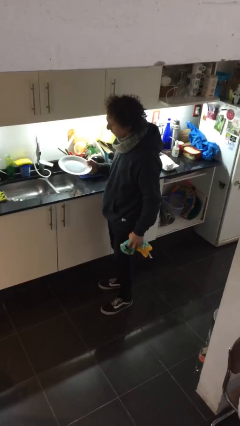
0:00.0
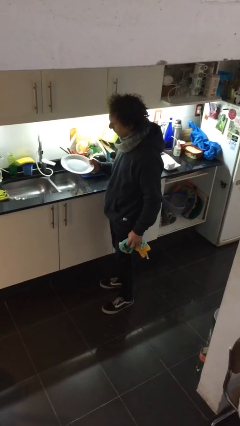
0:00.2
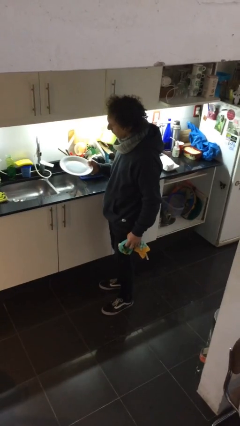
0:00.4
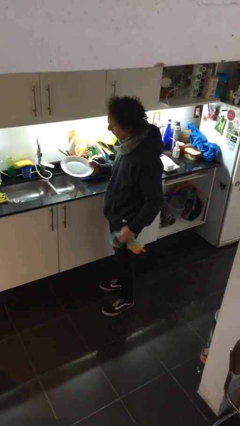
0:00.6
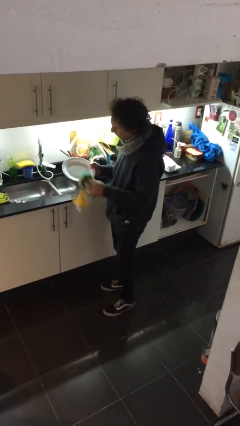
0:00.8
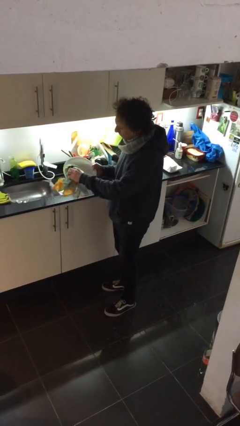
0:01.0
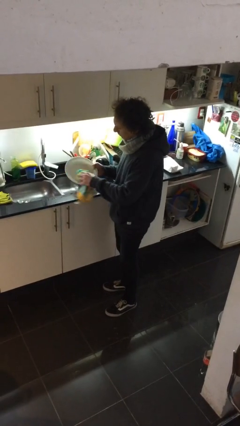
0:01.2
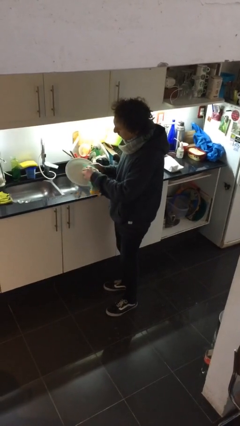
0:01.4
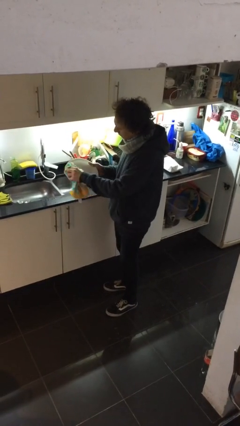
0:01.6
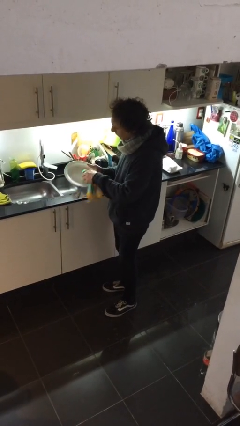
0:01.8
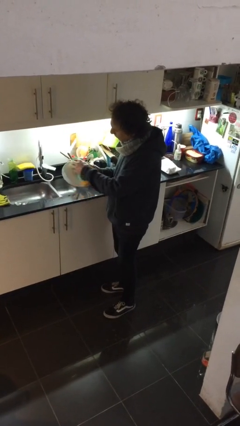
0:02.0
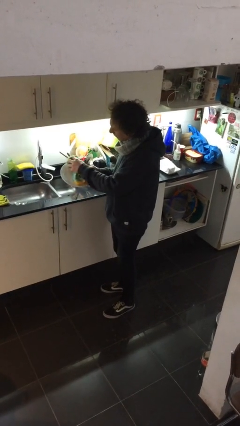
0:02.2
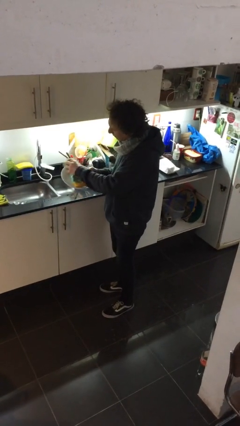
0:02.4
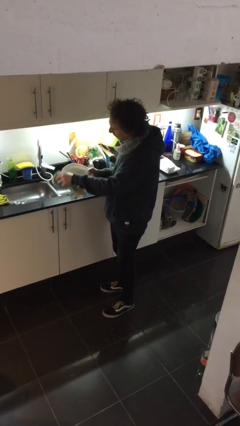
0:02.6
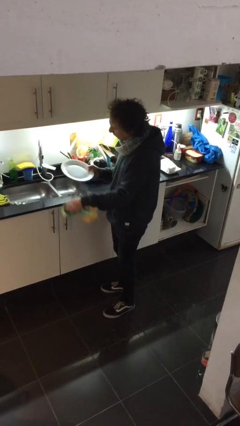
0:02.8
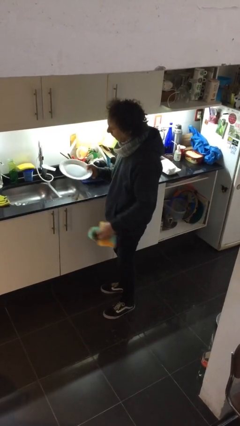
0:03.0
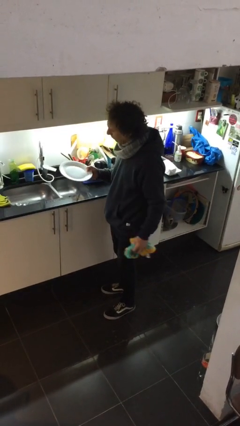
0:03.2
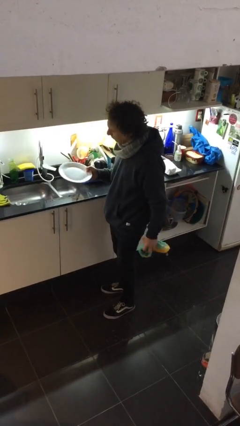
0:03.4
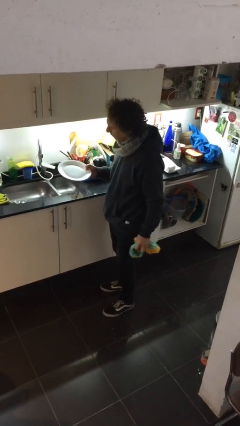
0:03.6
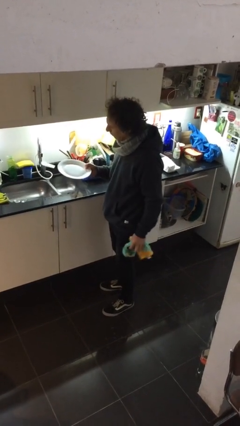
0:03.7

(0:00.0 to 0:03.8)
person dries dish

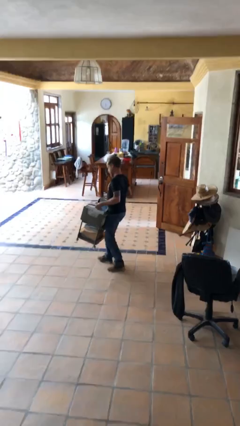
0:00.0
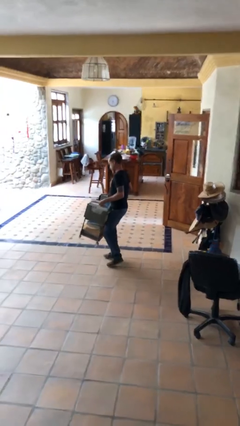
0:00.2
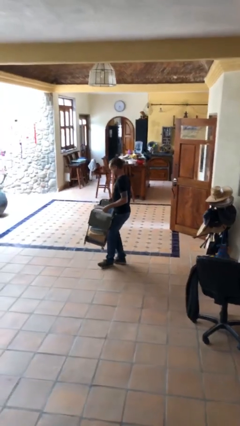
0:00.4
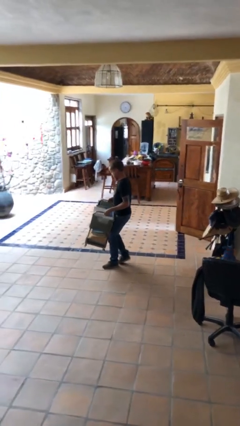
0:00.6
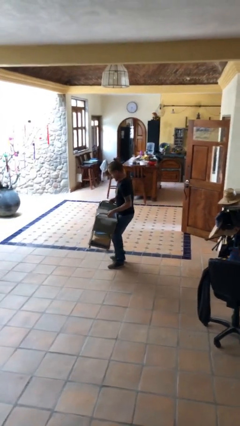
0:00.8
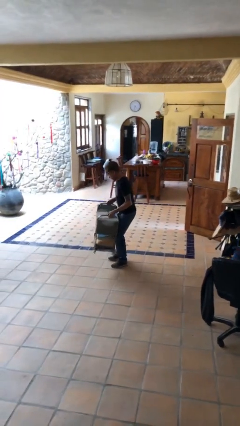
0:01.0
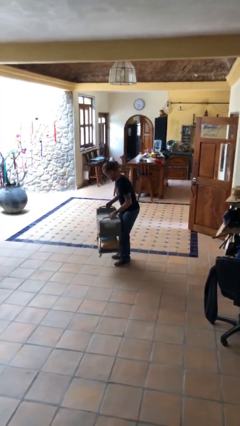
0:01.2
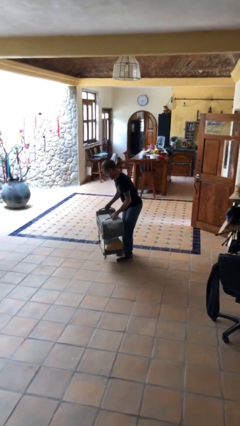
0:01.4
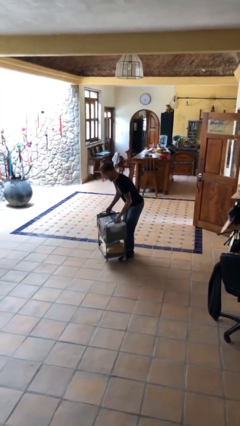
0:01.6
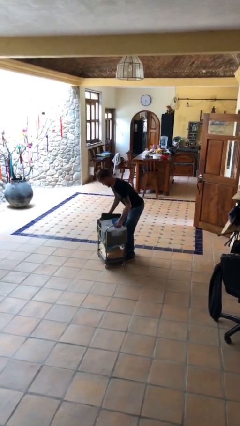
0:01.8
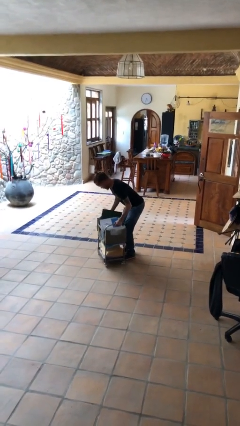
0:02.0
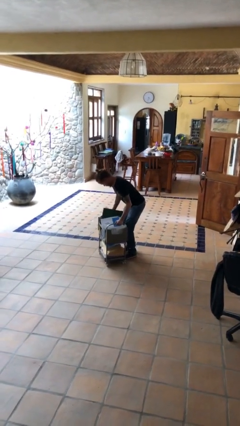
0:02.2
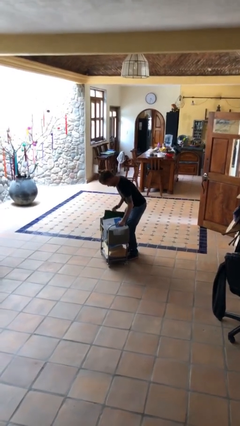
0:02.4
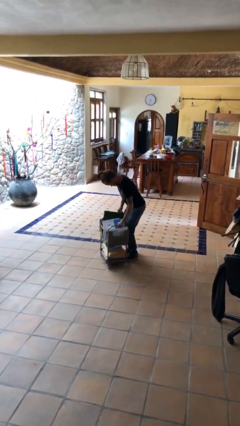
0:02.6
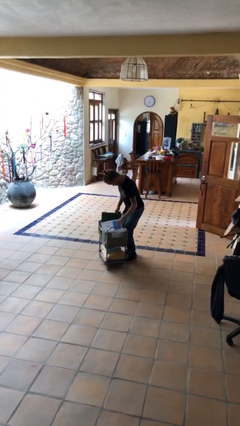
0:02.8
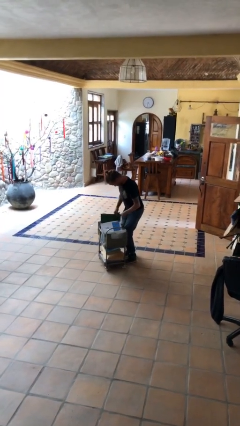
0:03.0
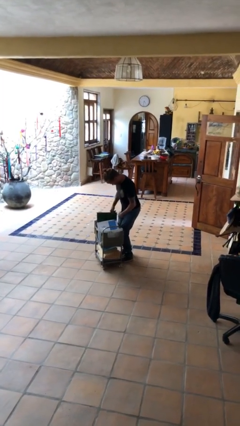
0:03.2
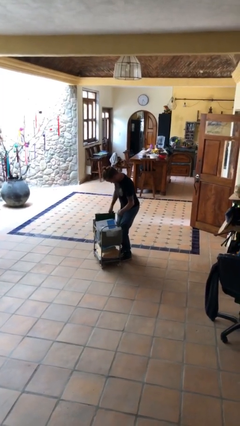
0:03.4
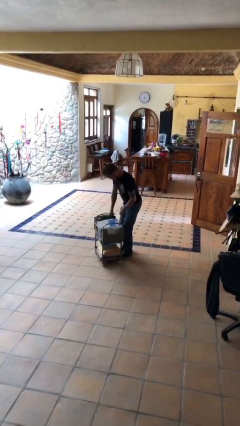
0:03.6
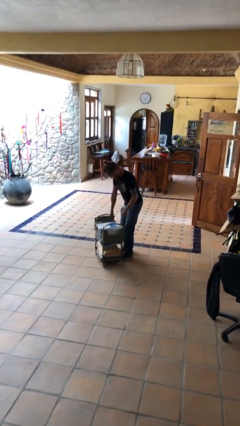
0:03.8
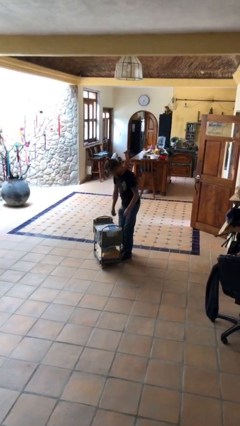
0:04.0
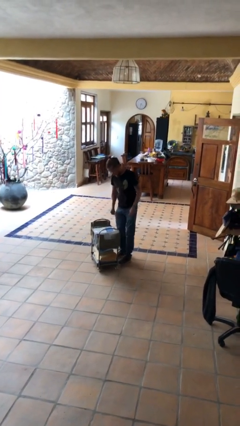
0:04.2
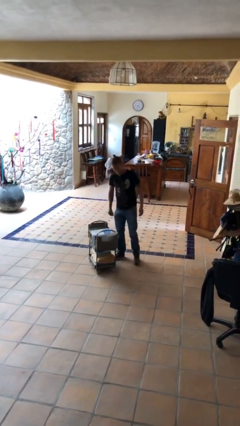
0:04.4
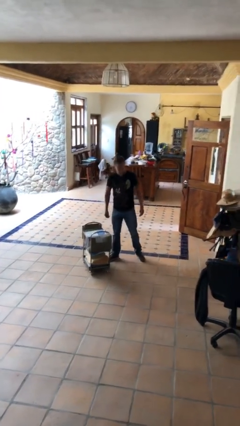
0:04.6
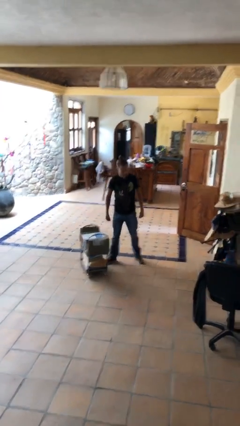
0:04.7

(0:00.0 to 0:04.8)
person puts down object on floor

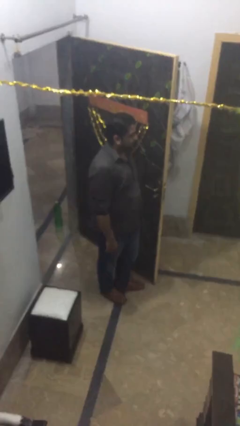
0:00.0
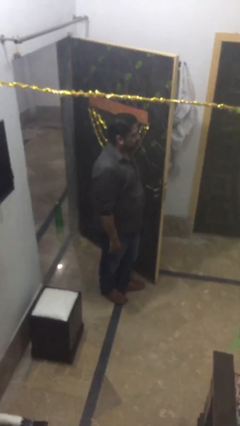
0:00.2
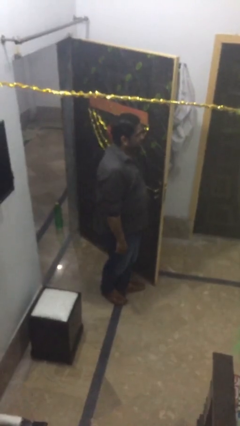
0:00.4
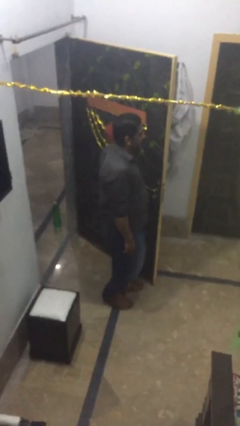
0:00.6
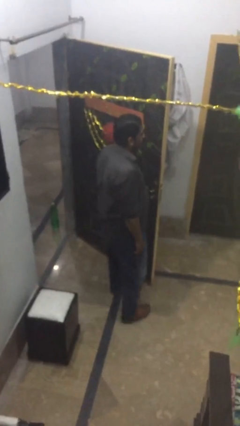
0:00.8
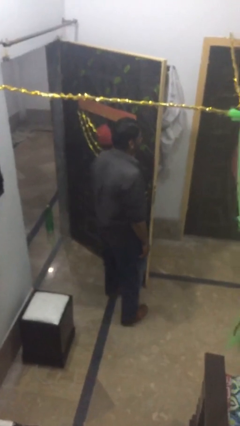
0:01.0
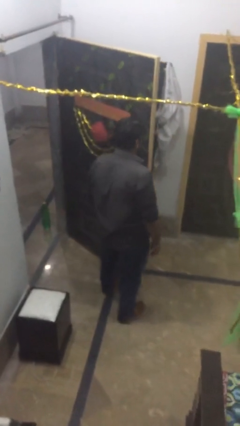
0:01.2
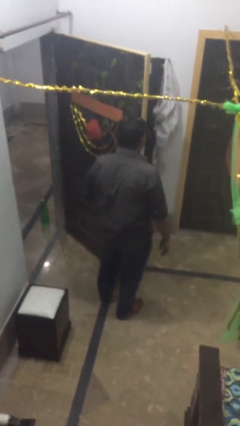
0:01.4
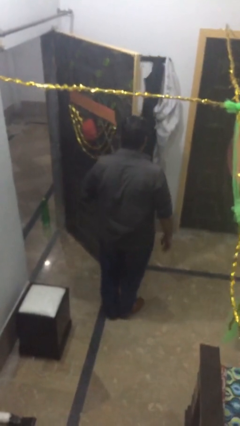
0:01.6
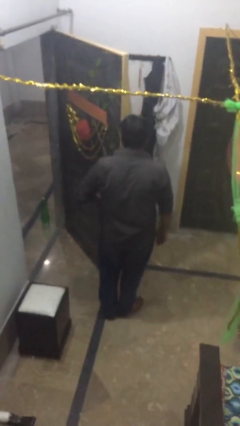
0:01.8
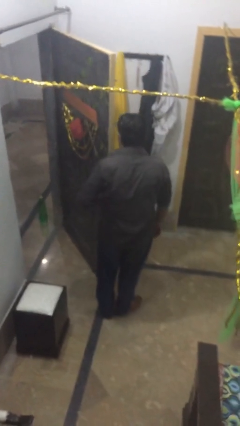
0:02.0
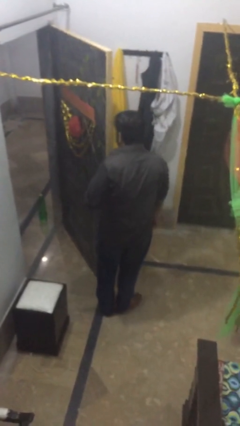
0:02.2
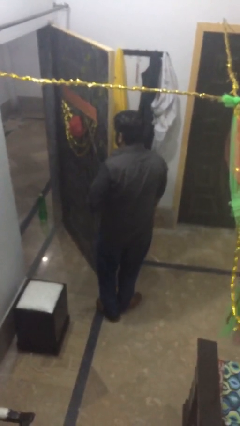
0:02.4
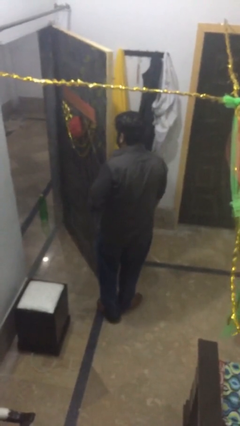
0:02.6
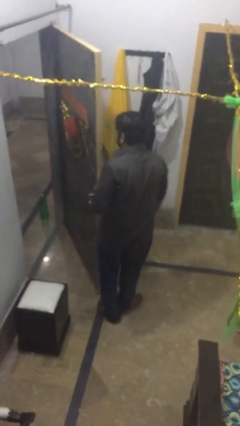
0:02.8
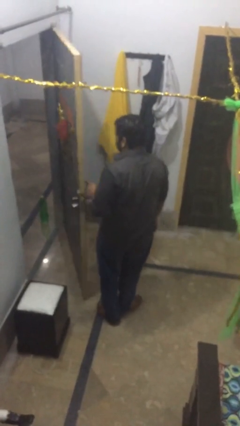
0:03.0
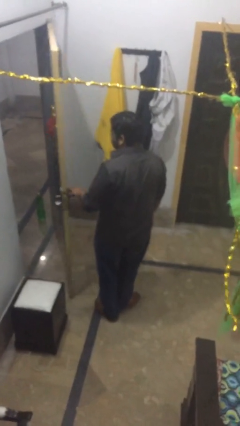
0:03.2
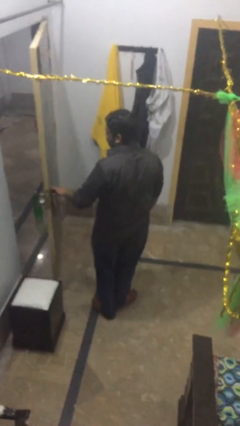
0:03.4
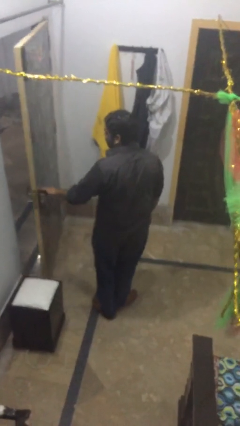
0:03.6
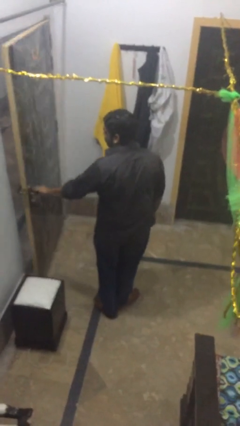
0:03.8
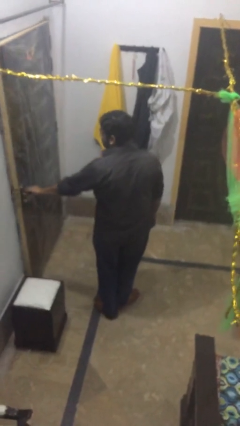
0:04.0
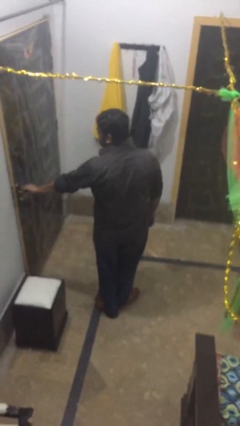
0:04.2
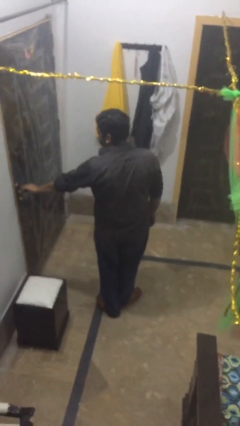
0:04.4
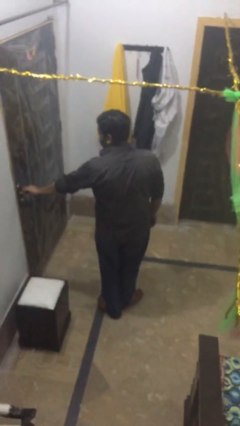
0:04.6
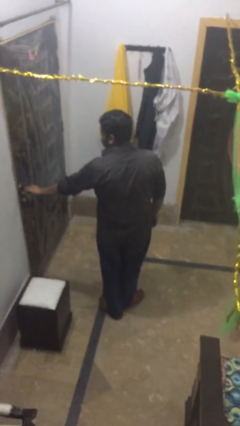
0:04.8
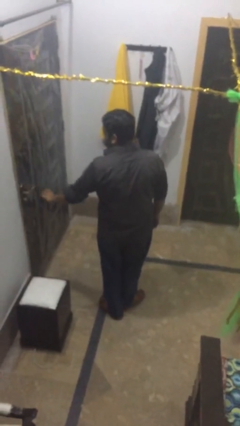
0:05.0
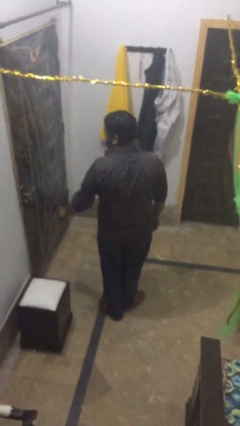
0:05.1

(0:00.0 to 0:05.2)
person closes facility door

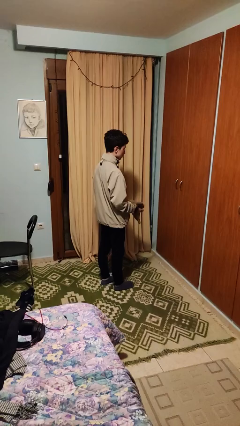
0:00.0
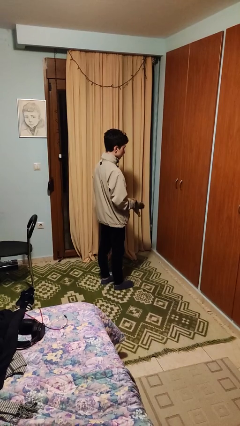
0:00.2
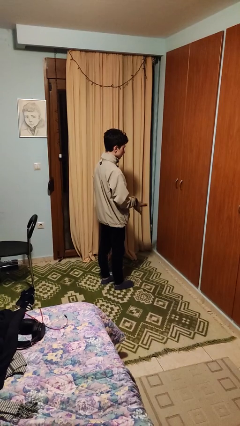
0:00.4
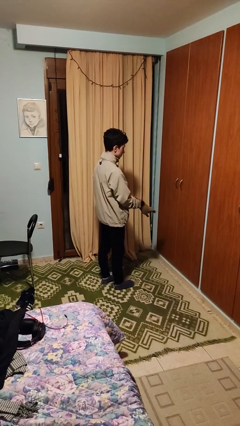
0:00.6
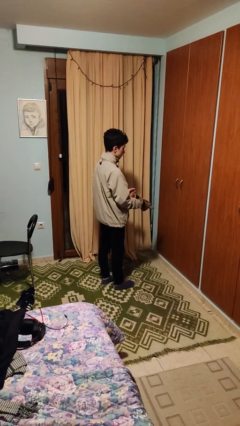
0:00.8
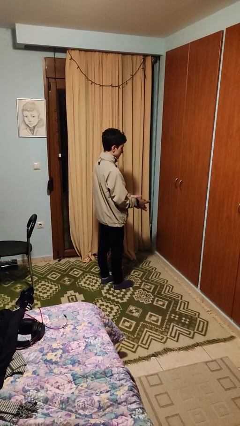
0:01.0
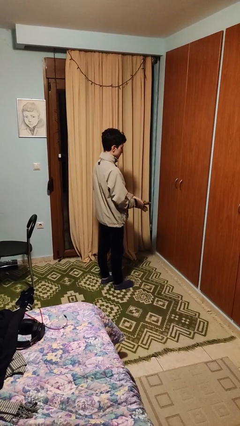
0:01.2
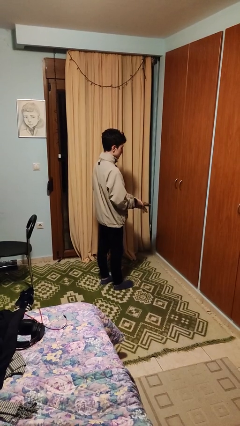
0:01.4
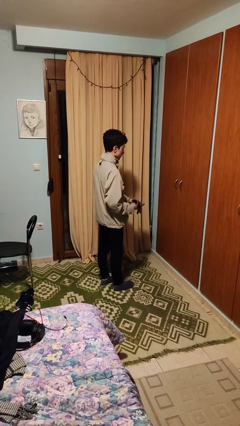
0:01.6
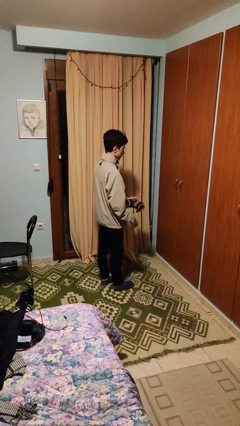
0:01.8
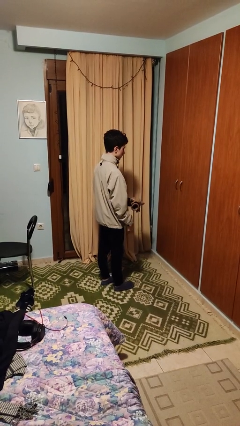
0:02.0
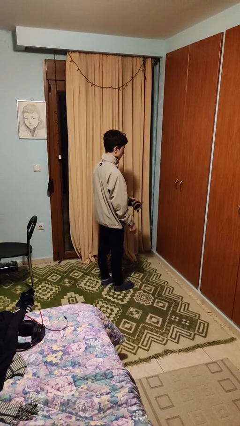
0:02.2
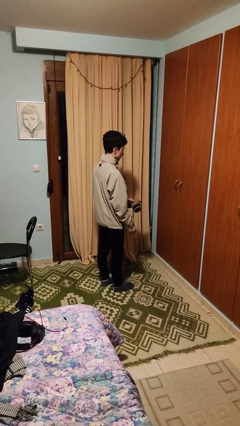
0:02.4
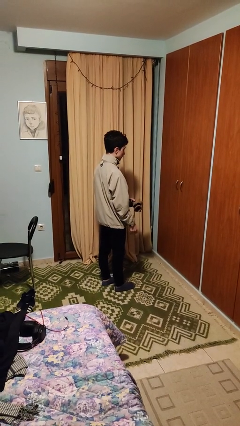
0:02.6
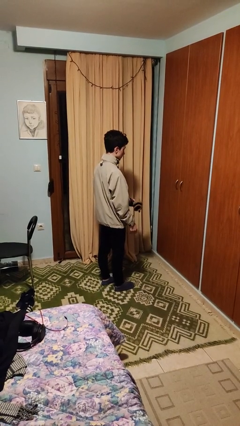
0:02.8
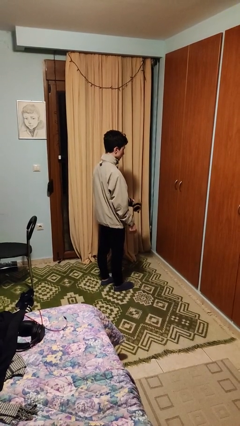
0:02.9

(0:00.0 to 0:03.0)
person takes off gloves

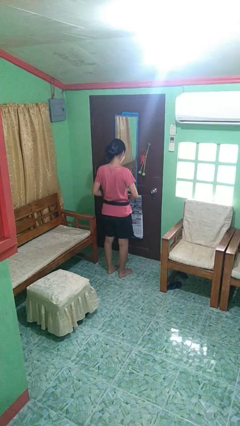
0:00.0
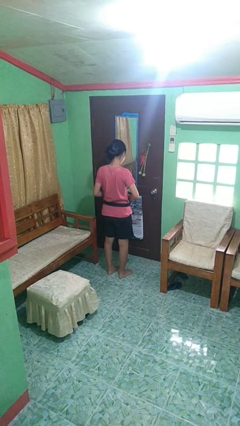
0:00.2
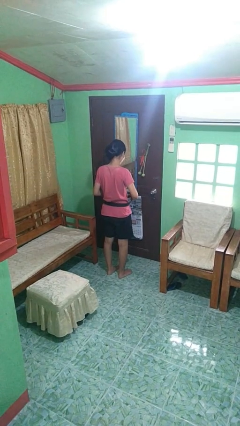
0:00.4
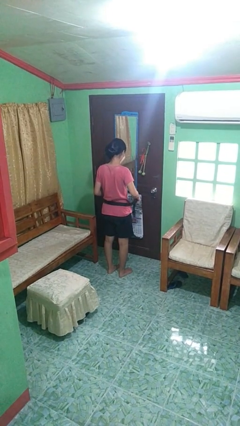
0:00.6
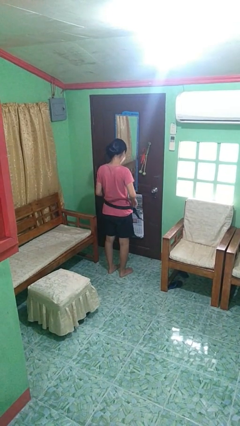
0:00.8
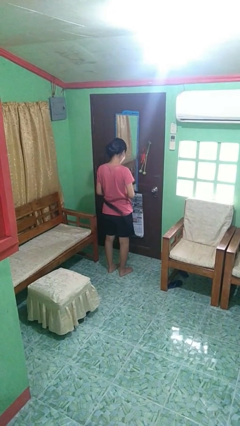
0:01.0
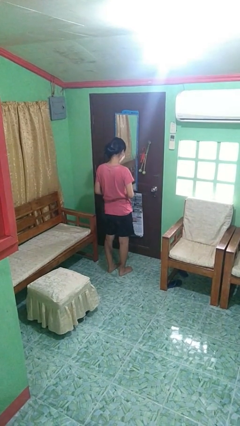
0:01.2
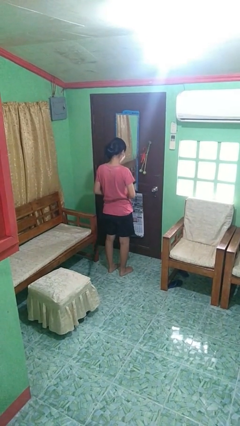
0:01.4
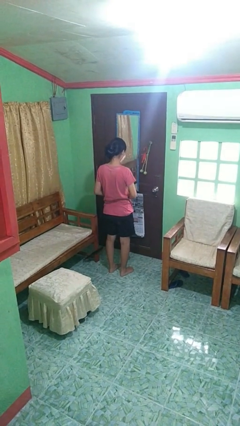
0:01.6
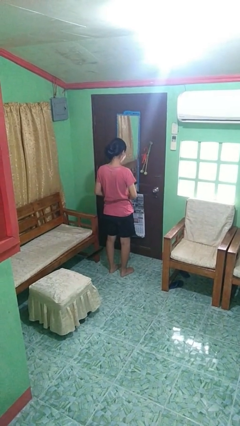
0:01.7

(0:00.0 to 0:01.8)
person takes off belt
